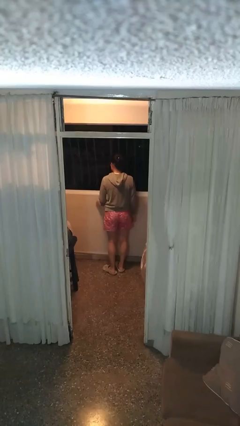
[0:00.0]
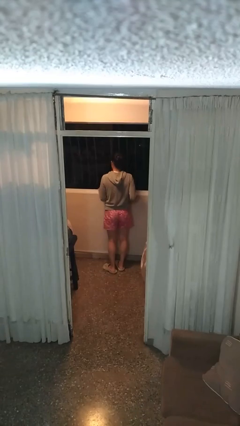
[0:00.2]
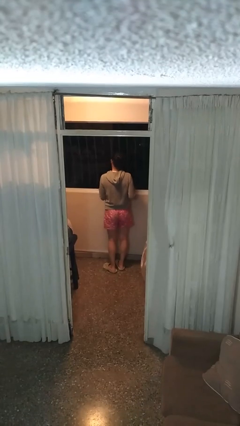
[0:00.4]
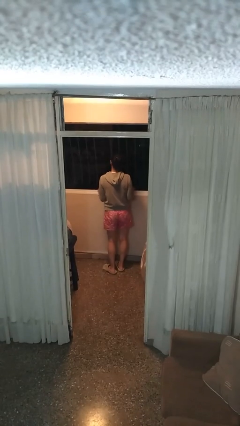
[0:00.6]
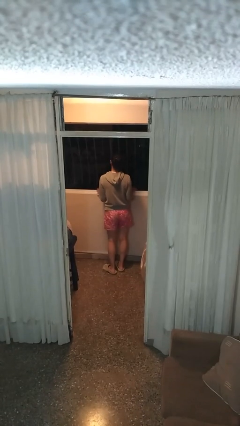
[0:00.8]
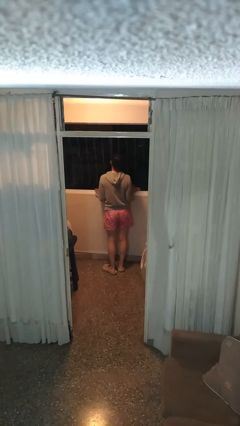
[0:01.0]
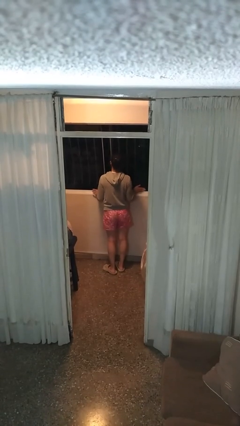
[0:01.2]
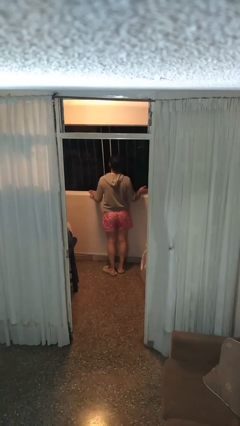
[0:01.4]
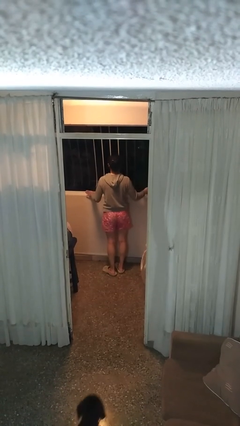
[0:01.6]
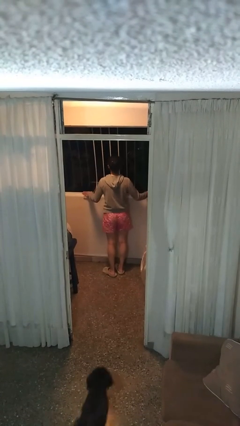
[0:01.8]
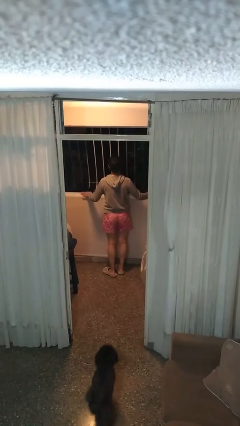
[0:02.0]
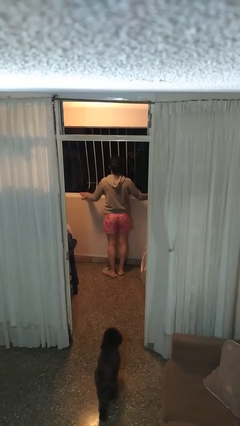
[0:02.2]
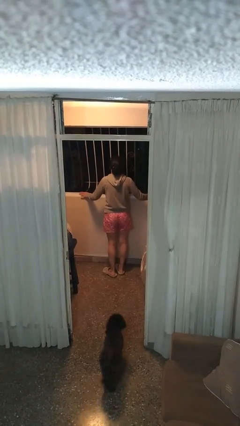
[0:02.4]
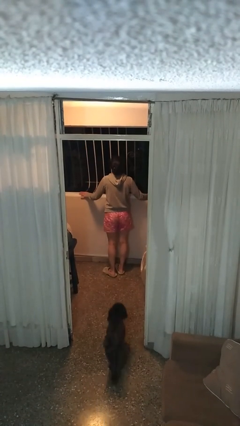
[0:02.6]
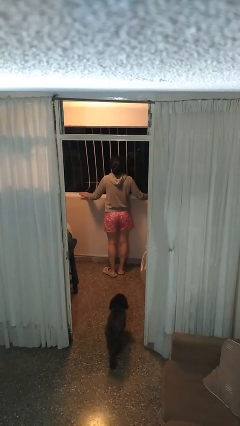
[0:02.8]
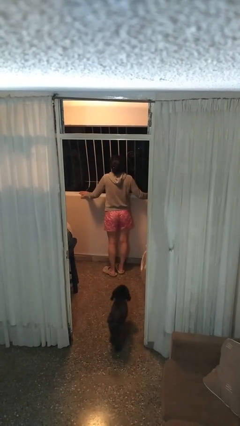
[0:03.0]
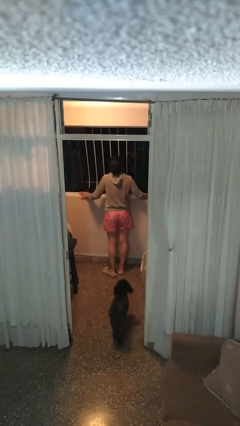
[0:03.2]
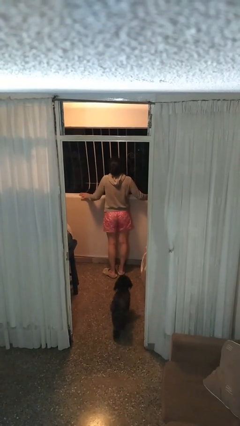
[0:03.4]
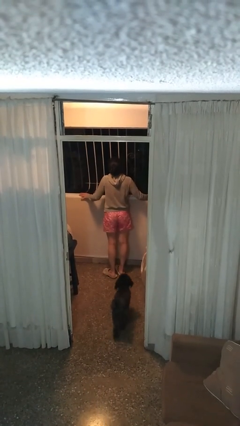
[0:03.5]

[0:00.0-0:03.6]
person opens home window

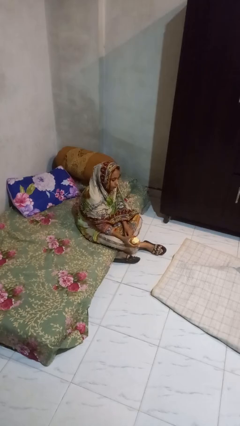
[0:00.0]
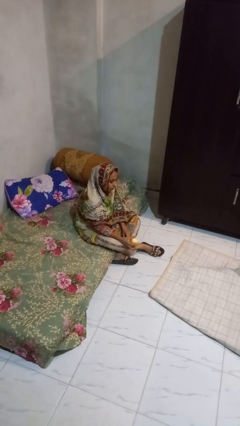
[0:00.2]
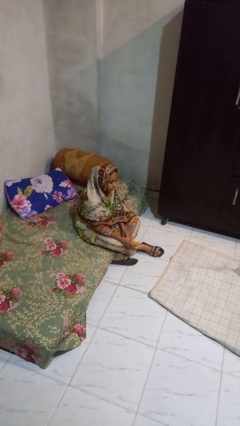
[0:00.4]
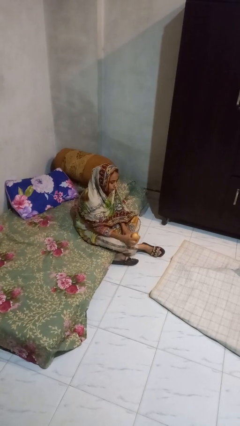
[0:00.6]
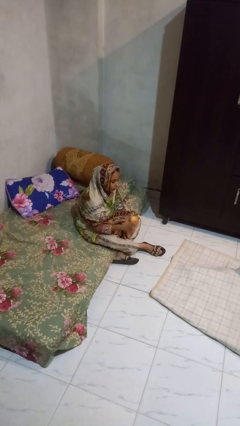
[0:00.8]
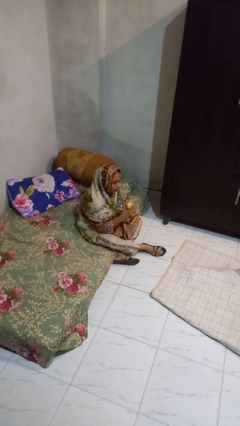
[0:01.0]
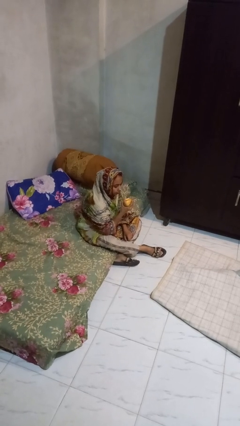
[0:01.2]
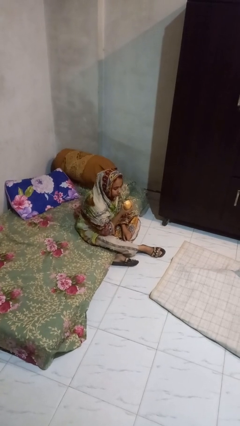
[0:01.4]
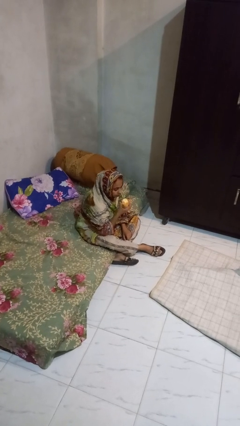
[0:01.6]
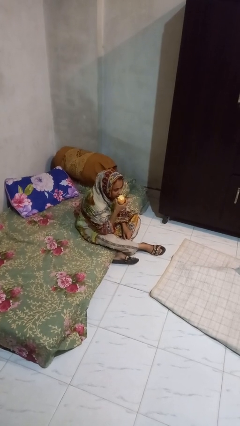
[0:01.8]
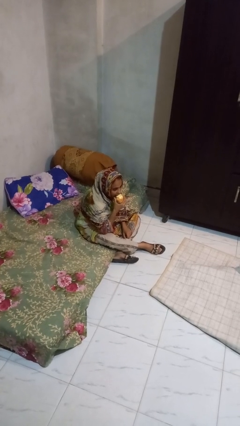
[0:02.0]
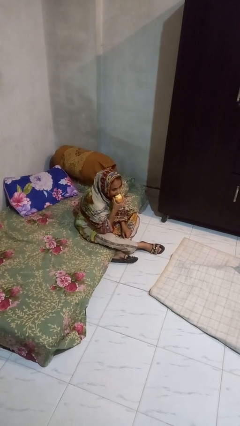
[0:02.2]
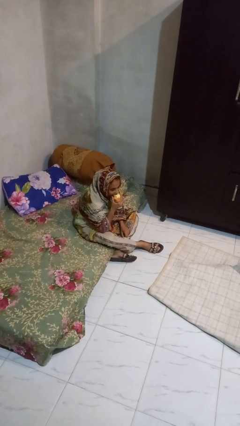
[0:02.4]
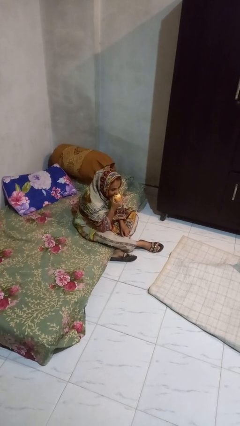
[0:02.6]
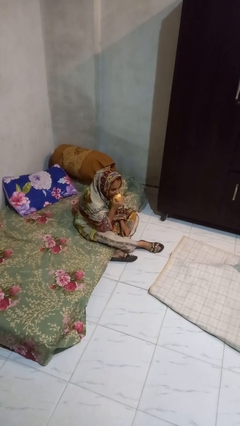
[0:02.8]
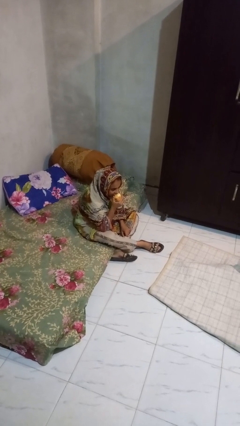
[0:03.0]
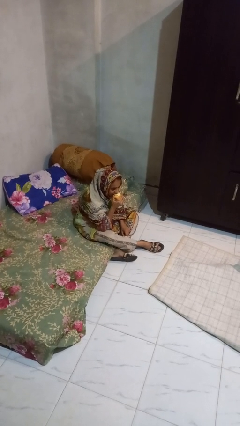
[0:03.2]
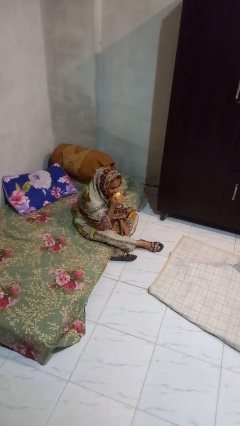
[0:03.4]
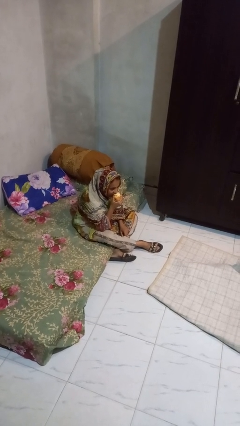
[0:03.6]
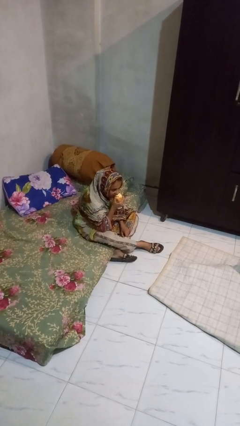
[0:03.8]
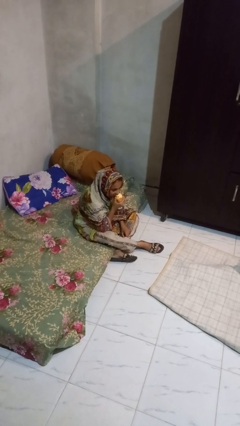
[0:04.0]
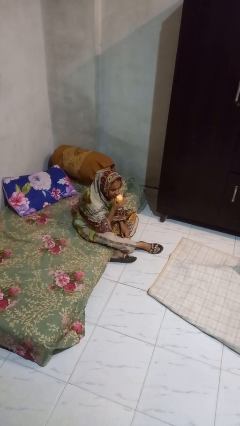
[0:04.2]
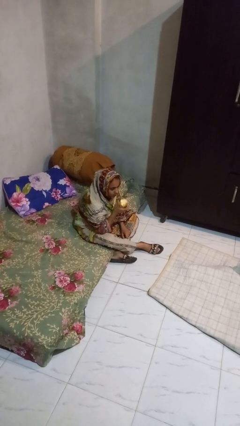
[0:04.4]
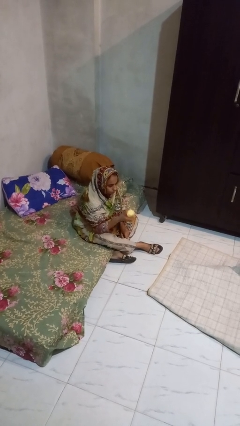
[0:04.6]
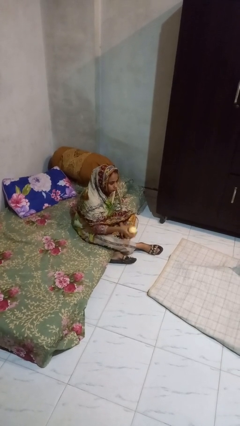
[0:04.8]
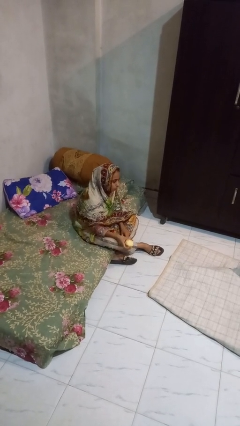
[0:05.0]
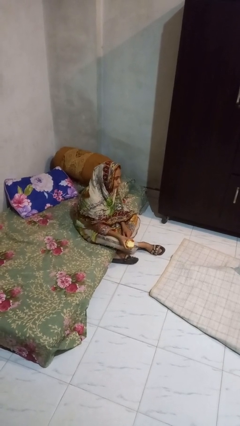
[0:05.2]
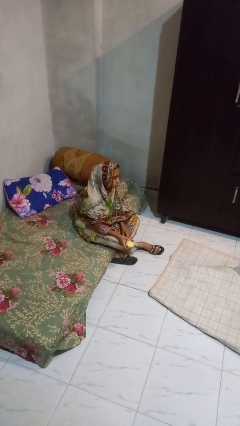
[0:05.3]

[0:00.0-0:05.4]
person eats apple

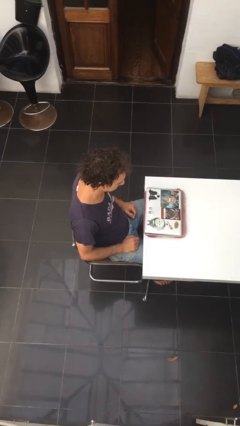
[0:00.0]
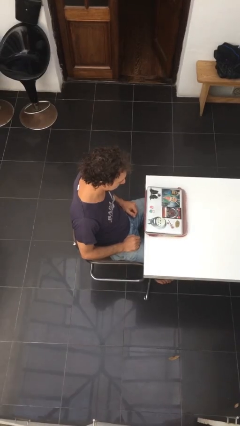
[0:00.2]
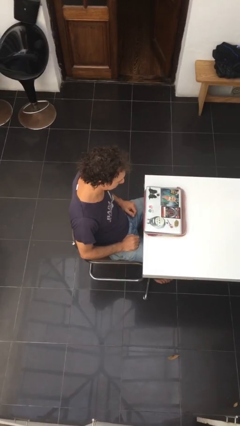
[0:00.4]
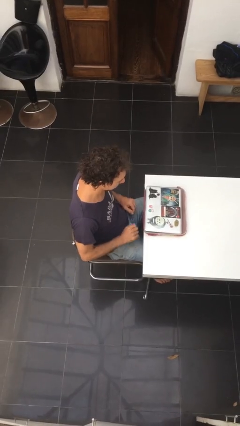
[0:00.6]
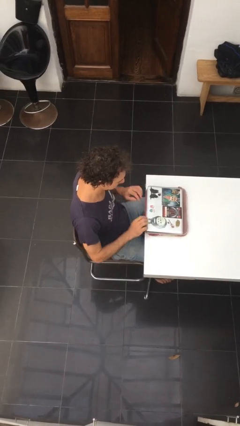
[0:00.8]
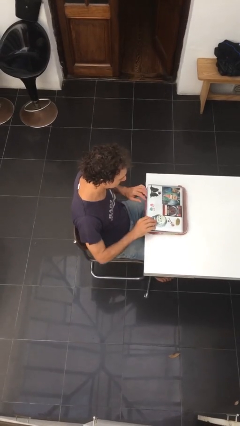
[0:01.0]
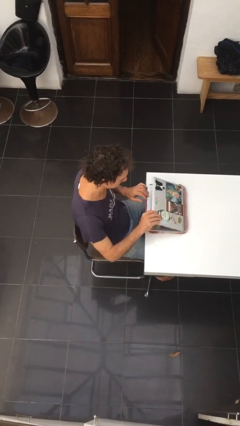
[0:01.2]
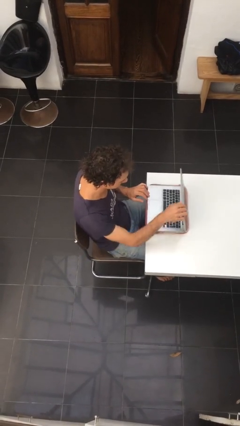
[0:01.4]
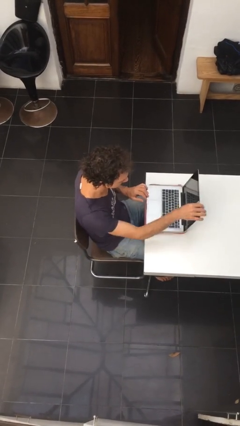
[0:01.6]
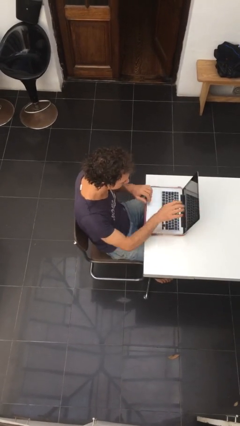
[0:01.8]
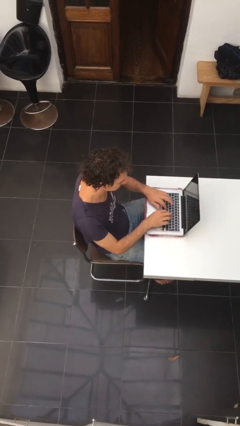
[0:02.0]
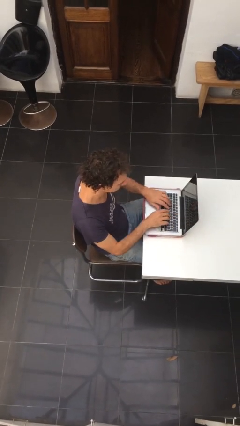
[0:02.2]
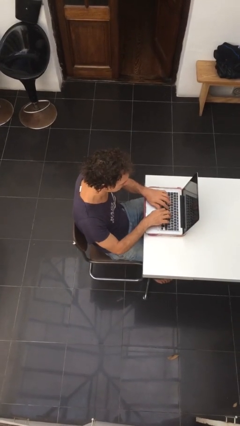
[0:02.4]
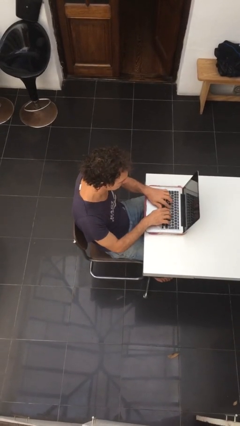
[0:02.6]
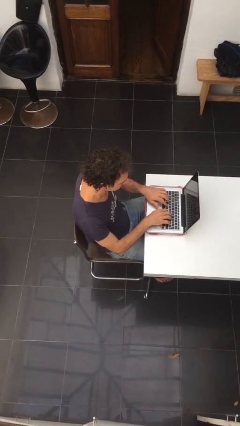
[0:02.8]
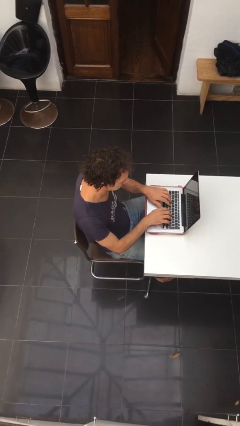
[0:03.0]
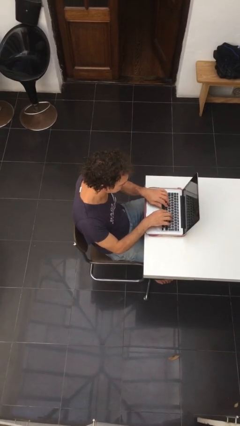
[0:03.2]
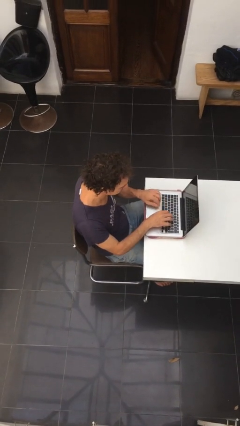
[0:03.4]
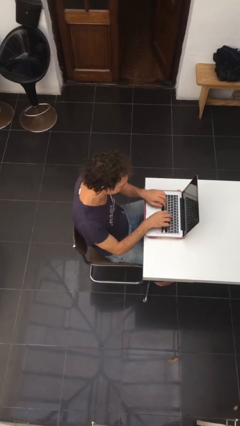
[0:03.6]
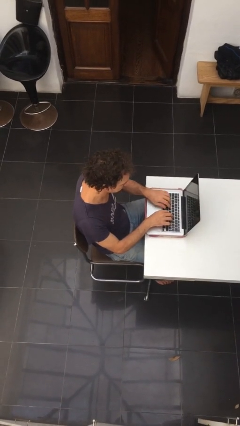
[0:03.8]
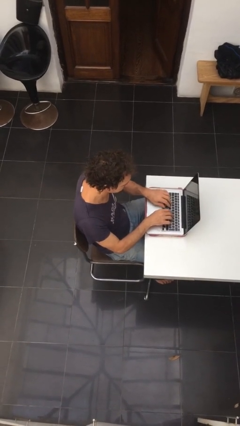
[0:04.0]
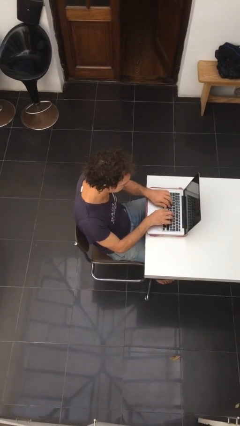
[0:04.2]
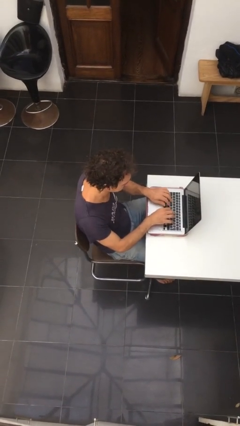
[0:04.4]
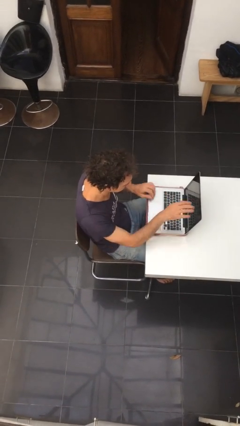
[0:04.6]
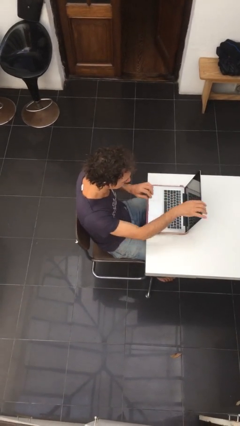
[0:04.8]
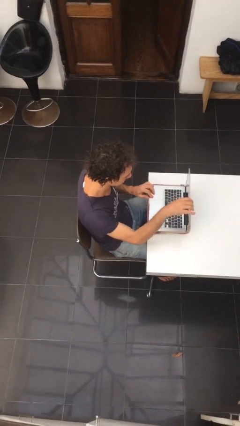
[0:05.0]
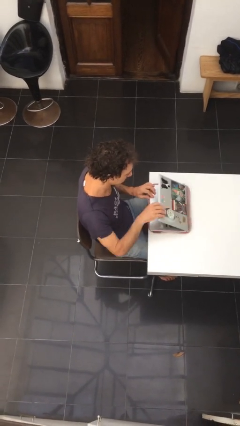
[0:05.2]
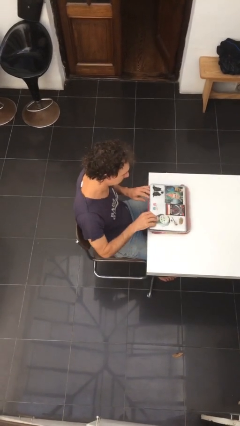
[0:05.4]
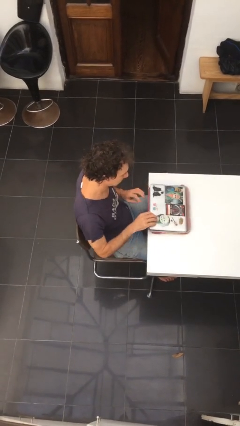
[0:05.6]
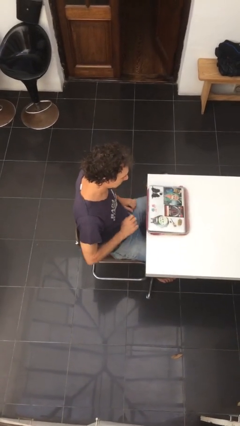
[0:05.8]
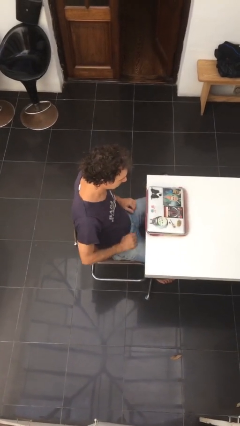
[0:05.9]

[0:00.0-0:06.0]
person interacts with laptop

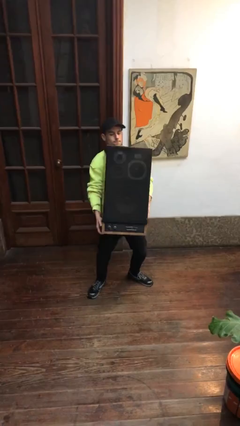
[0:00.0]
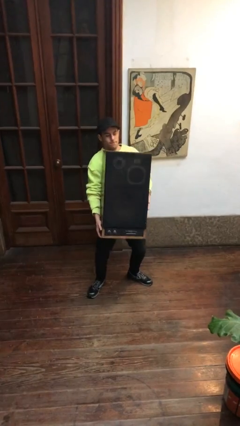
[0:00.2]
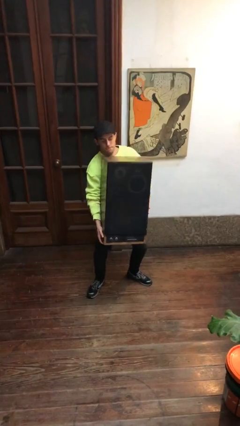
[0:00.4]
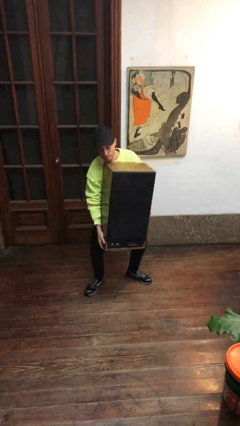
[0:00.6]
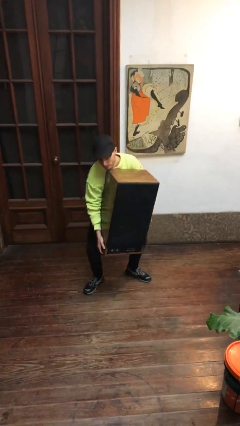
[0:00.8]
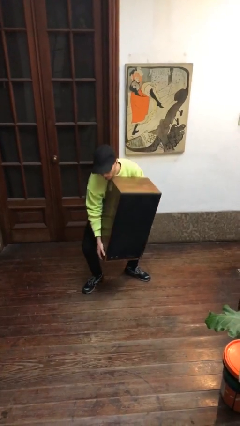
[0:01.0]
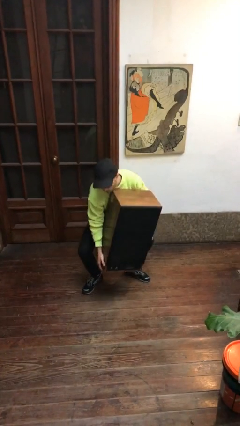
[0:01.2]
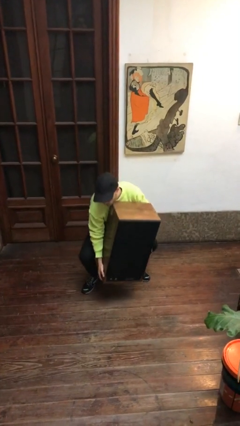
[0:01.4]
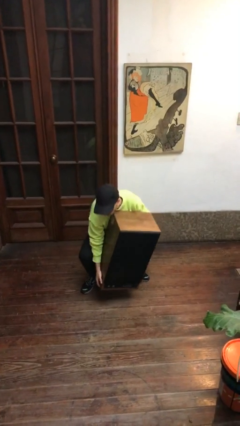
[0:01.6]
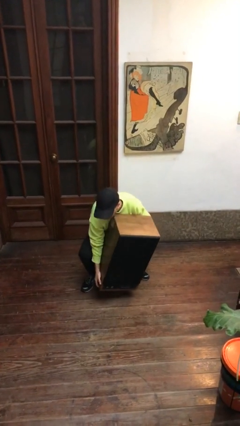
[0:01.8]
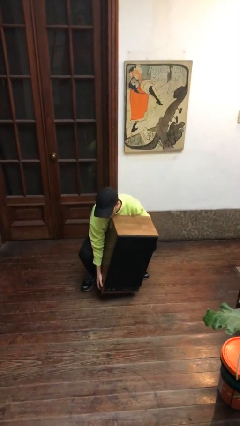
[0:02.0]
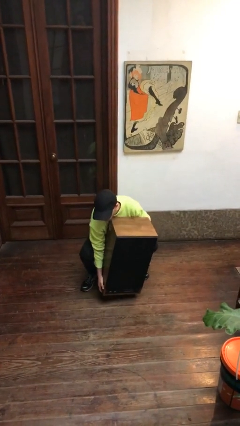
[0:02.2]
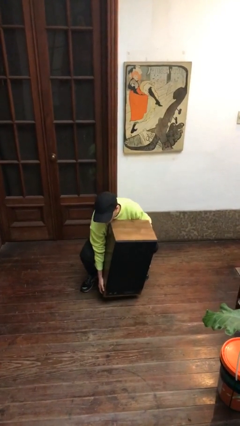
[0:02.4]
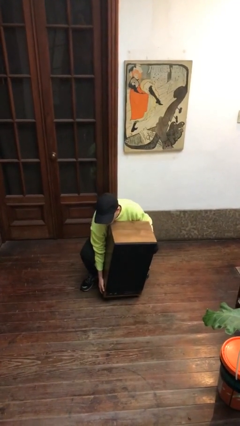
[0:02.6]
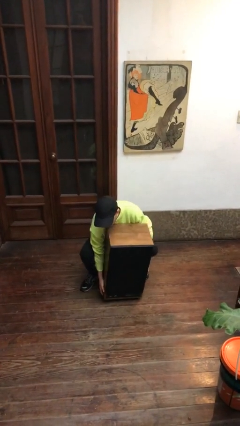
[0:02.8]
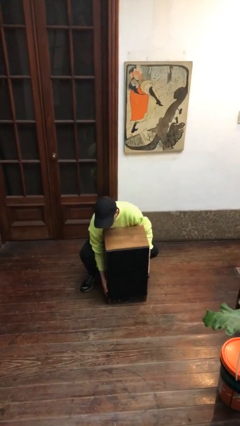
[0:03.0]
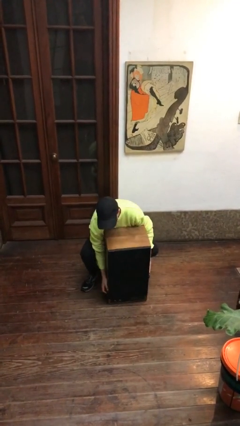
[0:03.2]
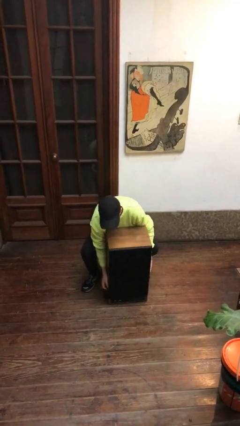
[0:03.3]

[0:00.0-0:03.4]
person puts down object on floor
